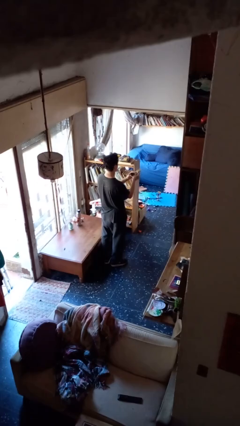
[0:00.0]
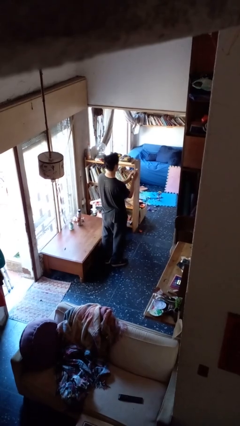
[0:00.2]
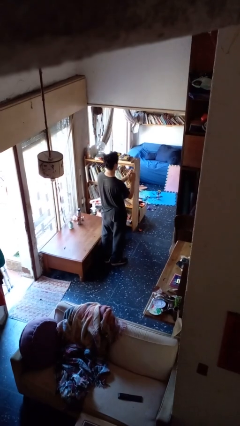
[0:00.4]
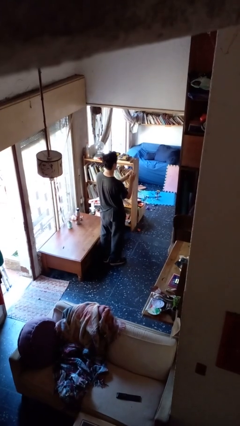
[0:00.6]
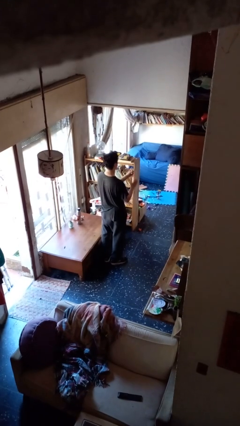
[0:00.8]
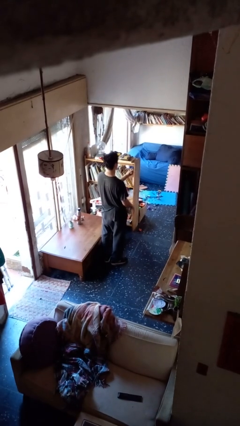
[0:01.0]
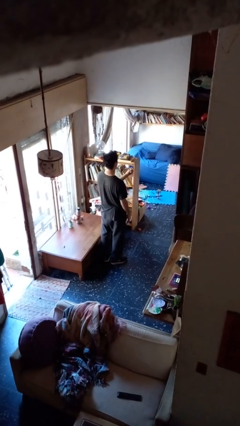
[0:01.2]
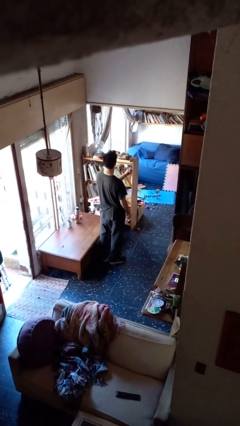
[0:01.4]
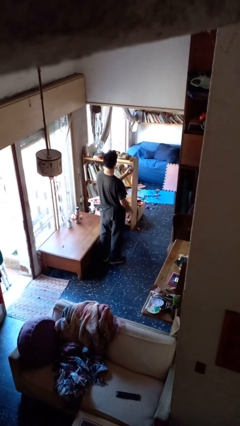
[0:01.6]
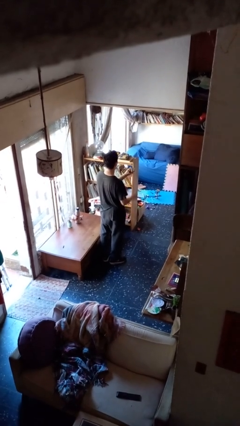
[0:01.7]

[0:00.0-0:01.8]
person crumples paper

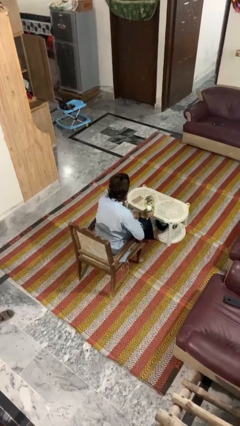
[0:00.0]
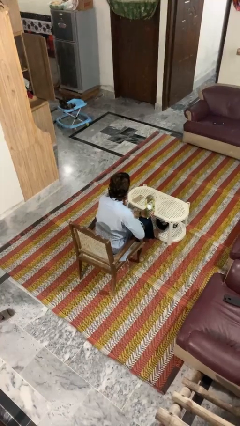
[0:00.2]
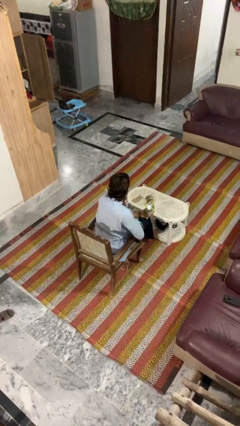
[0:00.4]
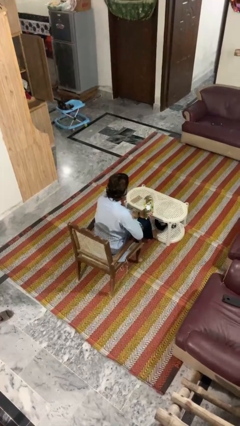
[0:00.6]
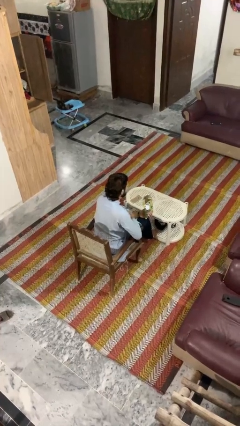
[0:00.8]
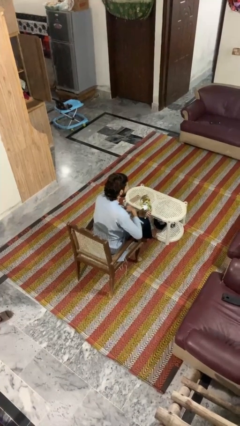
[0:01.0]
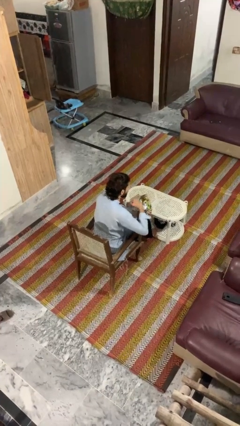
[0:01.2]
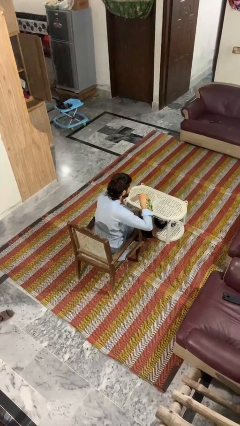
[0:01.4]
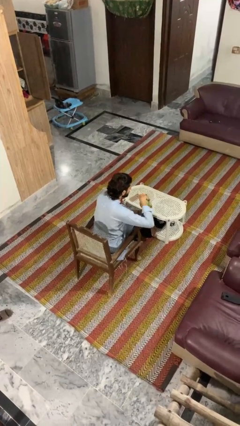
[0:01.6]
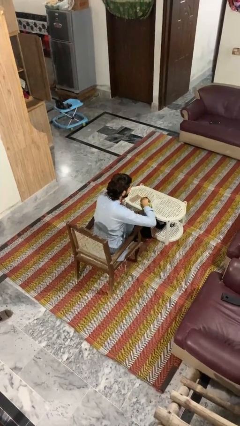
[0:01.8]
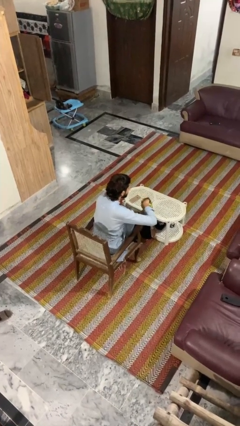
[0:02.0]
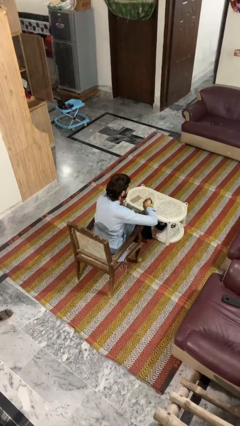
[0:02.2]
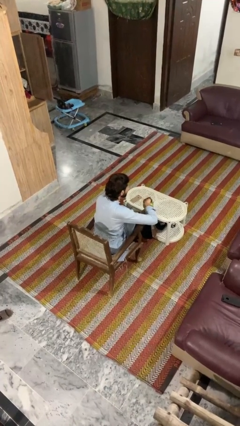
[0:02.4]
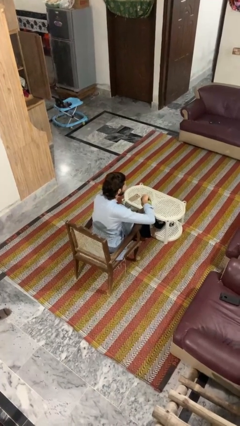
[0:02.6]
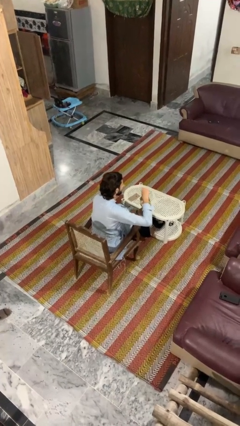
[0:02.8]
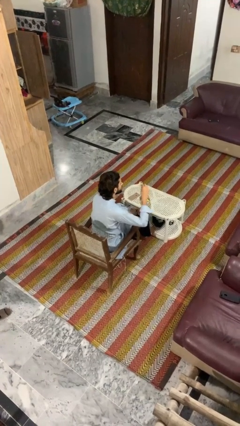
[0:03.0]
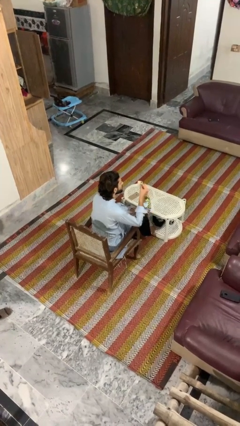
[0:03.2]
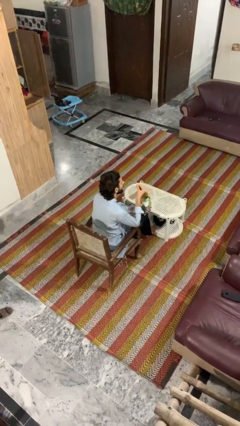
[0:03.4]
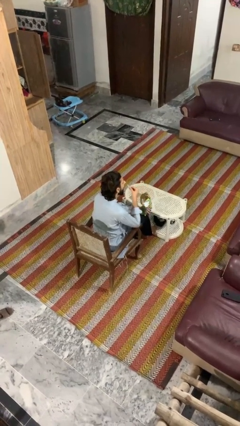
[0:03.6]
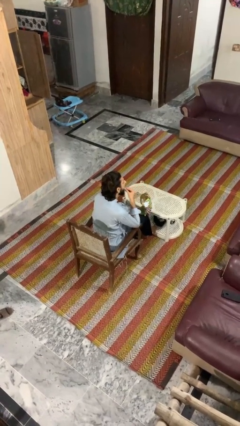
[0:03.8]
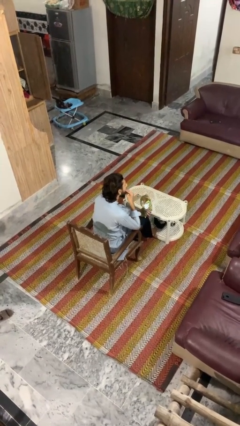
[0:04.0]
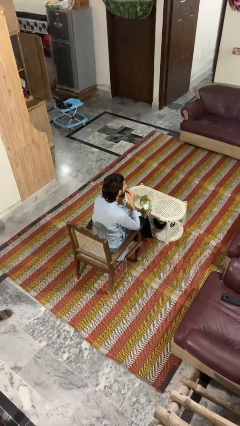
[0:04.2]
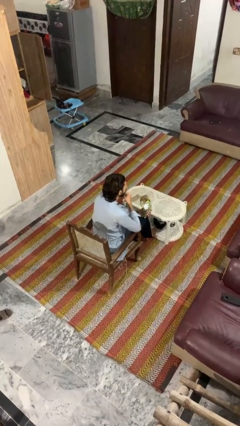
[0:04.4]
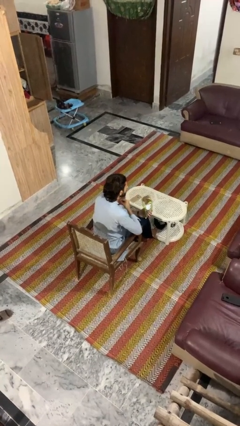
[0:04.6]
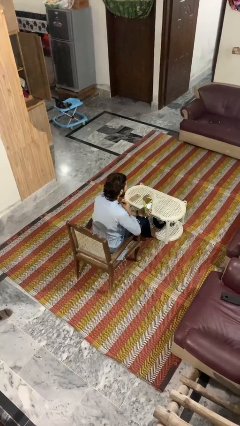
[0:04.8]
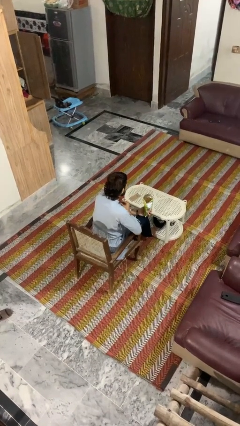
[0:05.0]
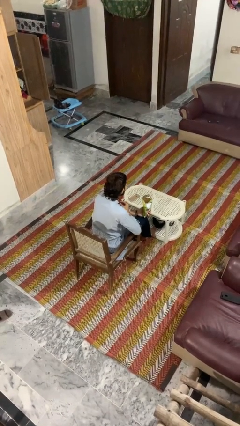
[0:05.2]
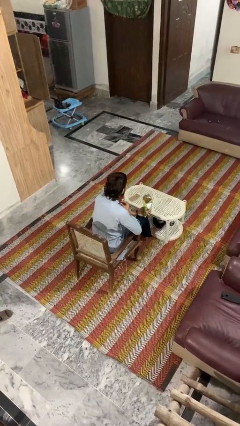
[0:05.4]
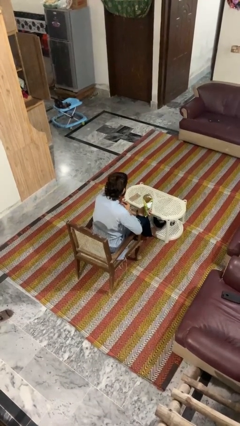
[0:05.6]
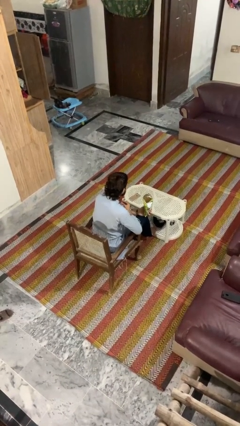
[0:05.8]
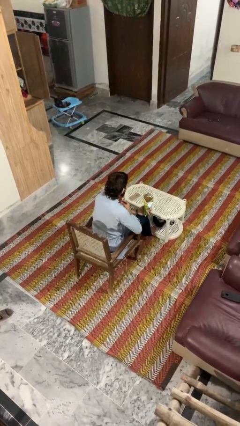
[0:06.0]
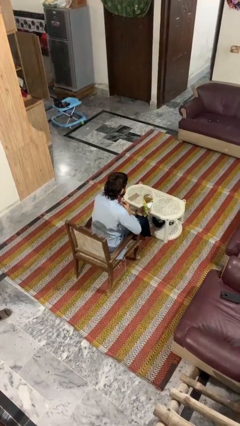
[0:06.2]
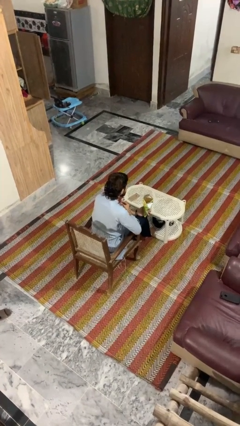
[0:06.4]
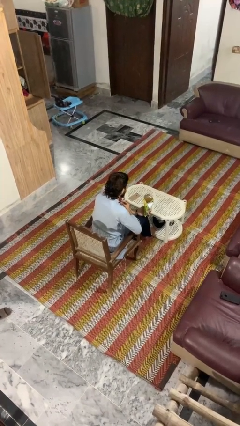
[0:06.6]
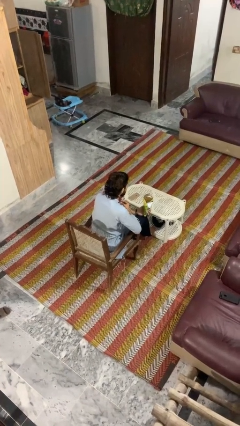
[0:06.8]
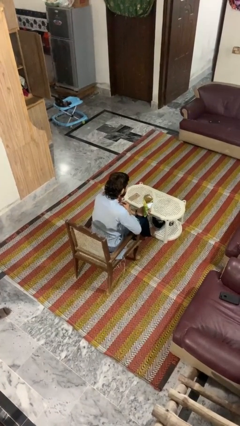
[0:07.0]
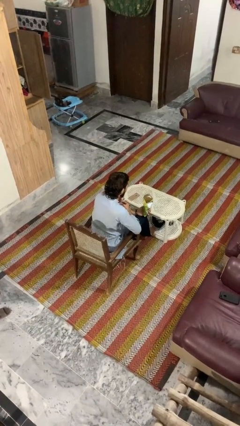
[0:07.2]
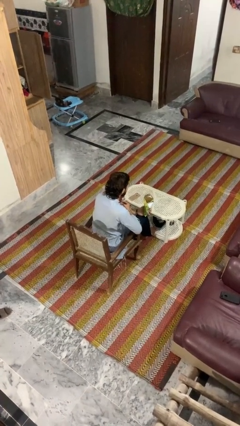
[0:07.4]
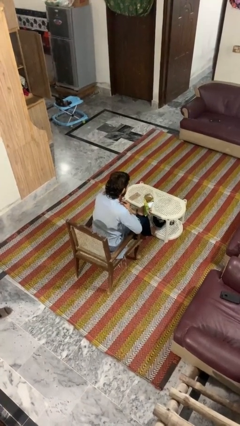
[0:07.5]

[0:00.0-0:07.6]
person eats snack from bag

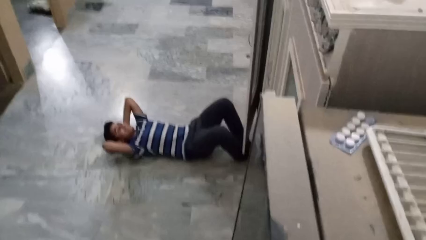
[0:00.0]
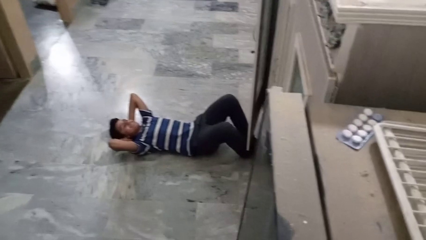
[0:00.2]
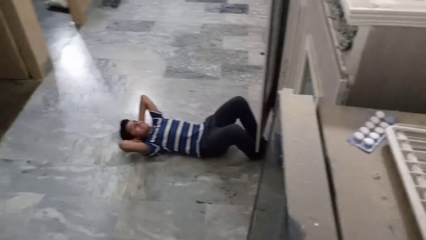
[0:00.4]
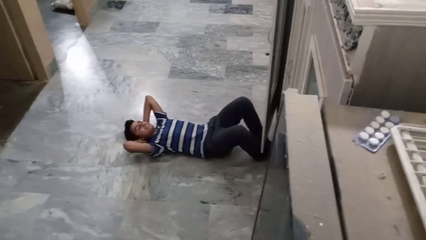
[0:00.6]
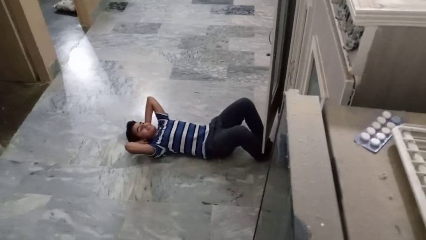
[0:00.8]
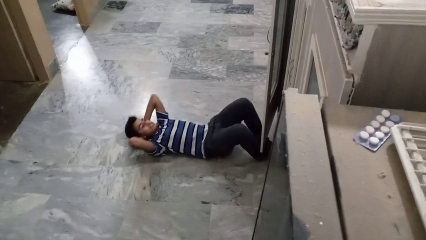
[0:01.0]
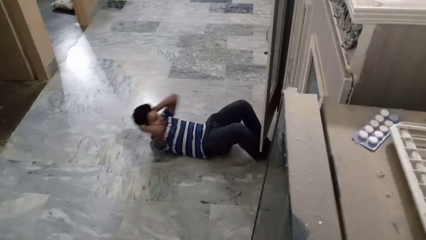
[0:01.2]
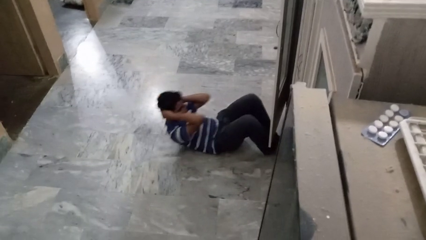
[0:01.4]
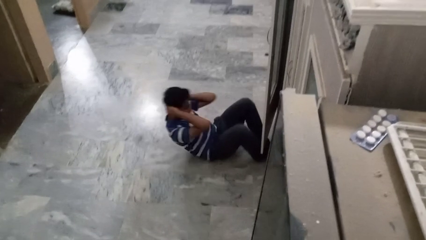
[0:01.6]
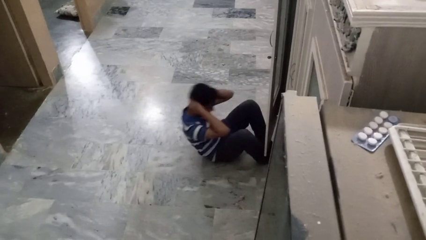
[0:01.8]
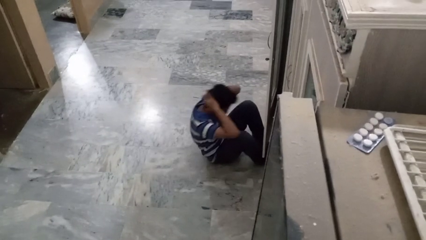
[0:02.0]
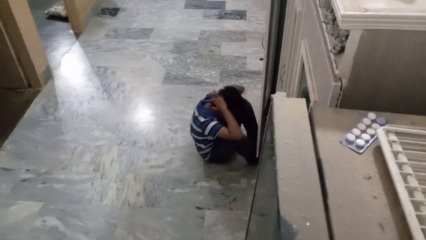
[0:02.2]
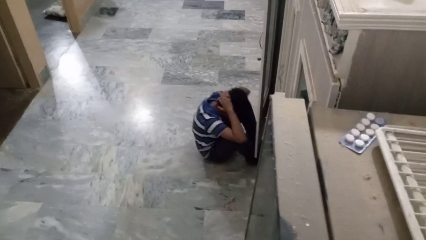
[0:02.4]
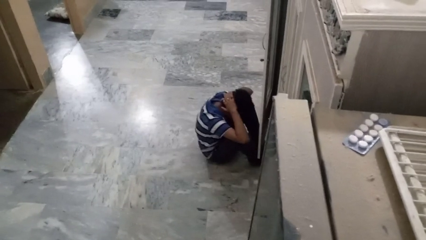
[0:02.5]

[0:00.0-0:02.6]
person exercises with situp

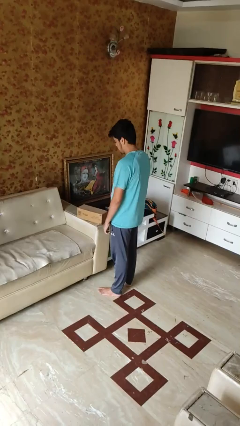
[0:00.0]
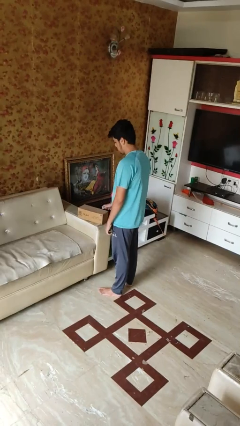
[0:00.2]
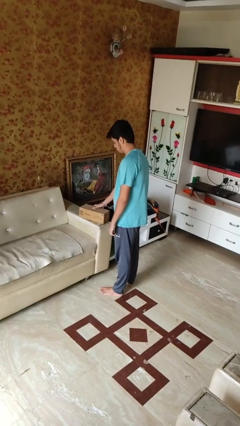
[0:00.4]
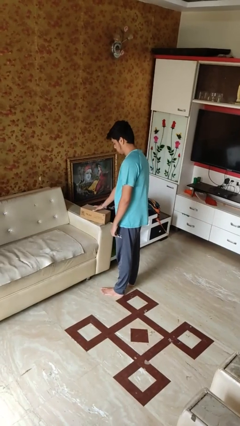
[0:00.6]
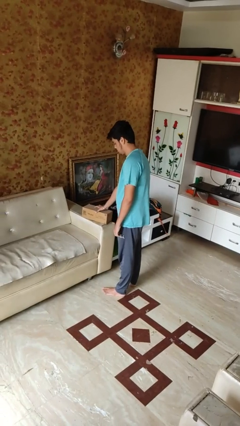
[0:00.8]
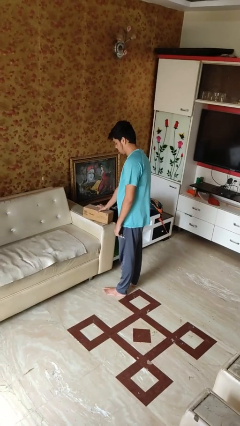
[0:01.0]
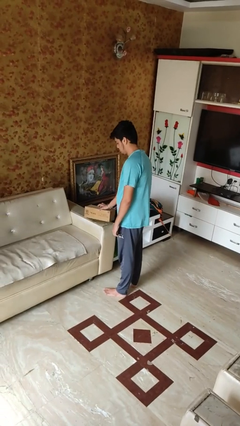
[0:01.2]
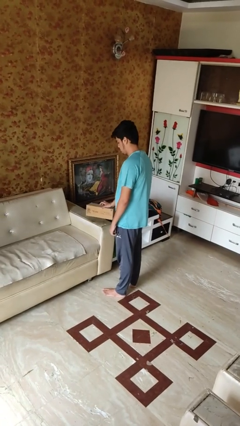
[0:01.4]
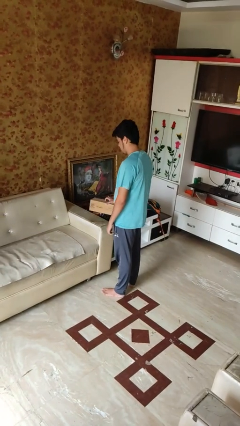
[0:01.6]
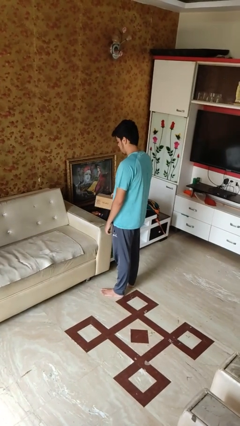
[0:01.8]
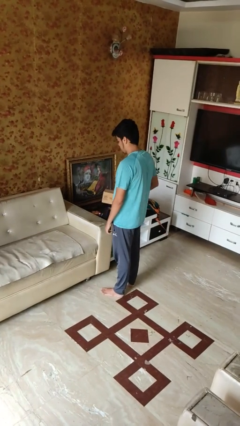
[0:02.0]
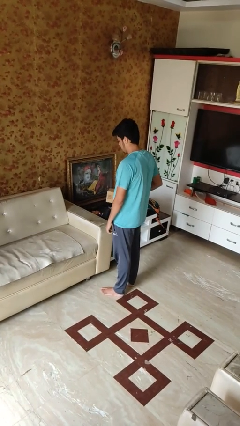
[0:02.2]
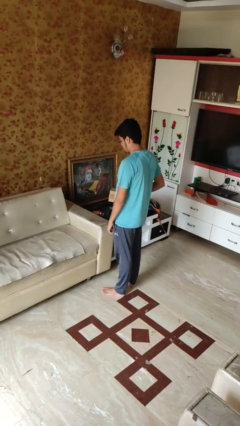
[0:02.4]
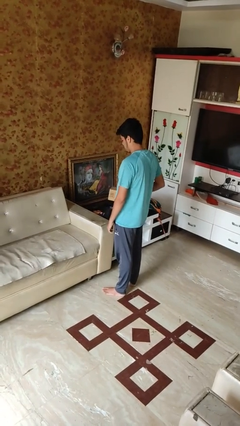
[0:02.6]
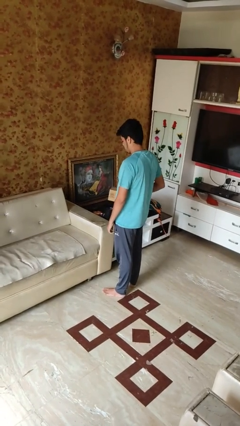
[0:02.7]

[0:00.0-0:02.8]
person picks up object from couch

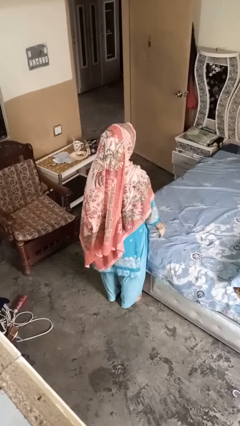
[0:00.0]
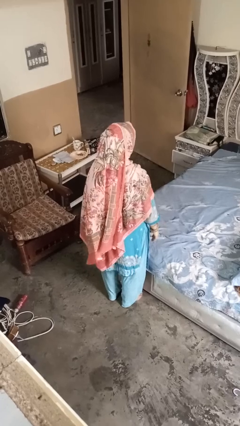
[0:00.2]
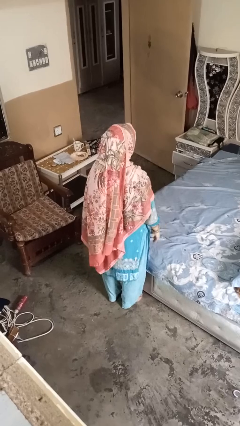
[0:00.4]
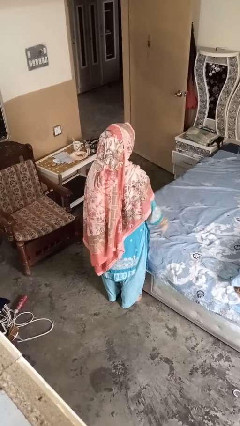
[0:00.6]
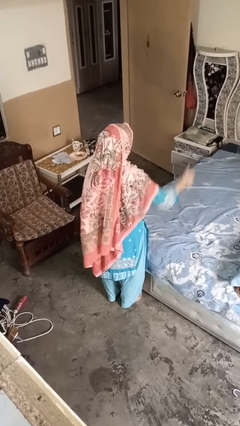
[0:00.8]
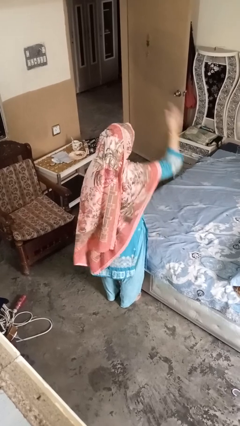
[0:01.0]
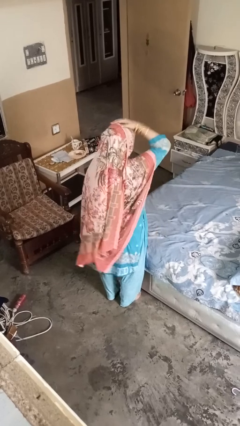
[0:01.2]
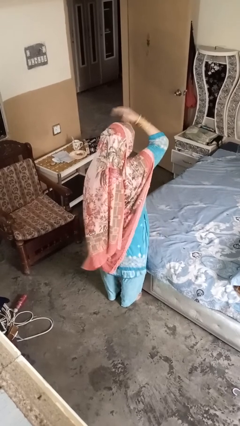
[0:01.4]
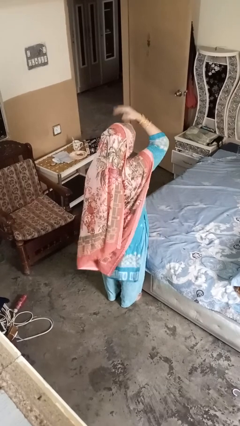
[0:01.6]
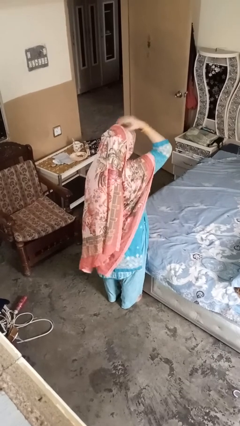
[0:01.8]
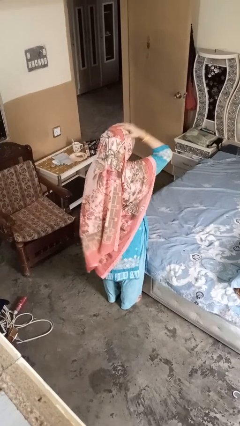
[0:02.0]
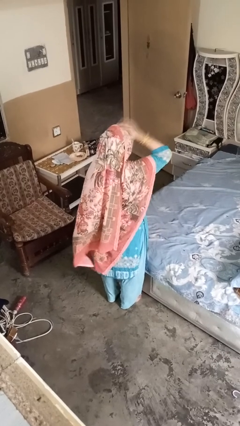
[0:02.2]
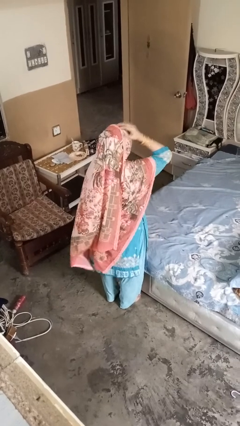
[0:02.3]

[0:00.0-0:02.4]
person pats head

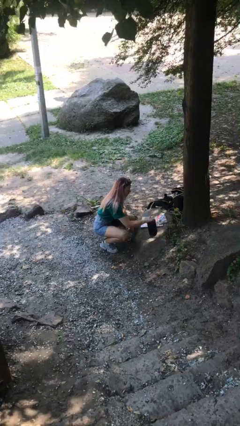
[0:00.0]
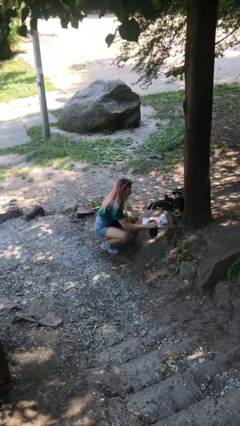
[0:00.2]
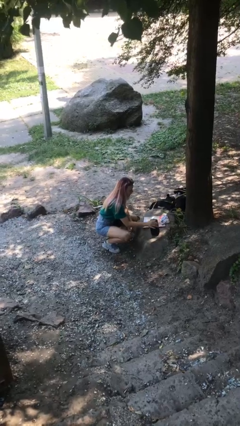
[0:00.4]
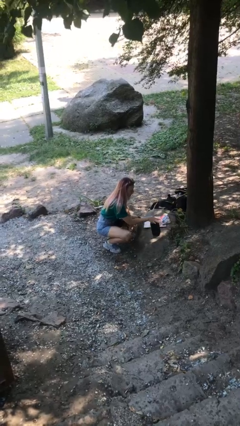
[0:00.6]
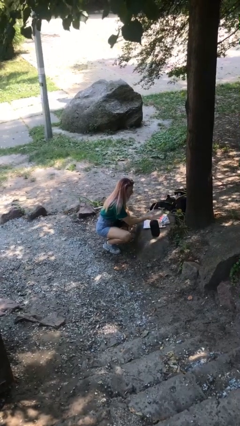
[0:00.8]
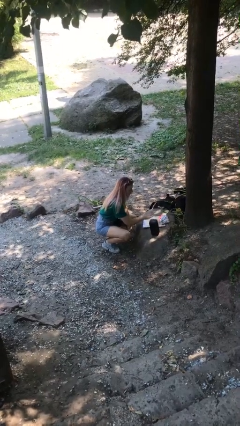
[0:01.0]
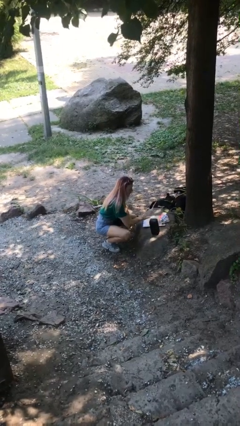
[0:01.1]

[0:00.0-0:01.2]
person waves hand over object
